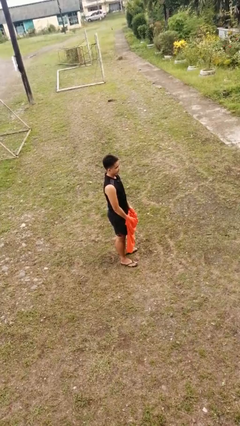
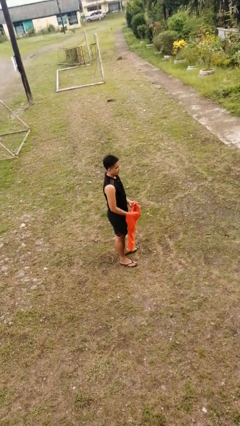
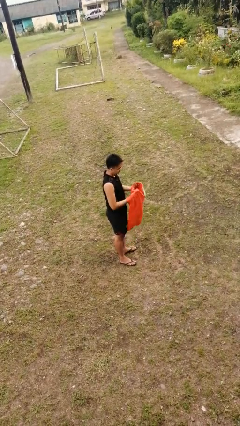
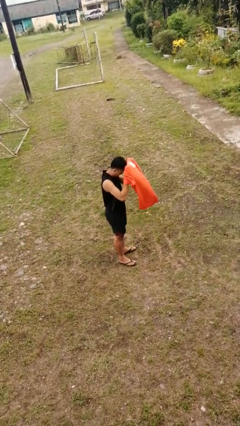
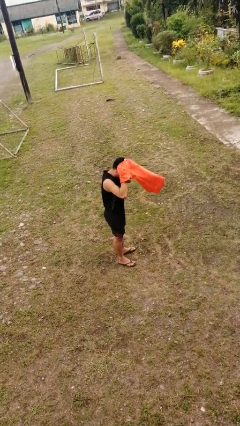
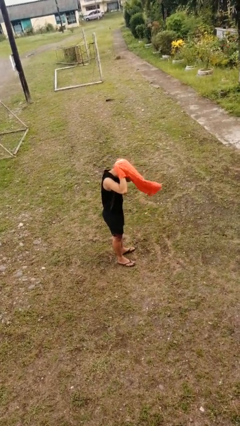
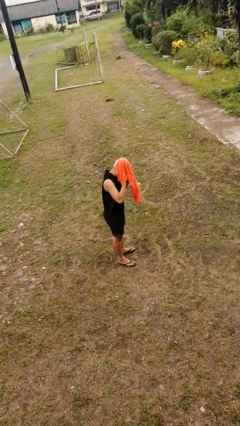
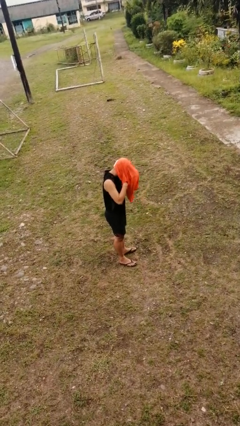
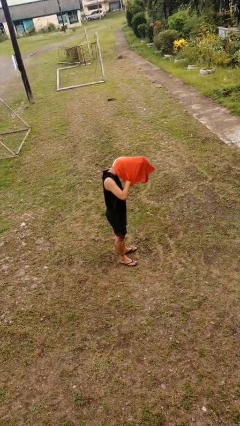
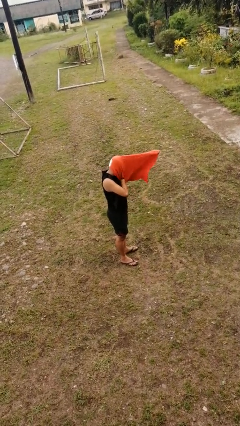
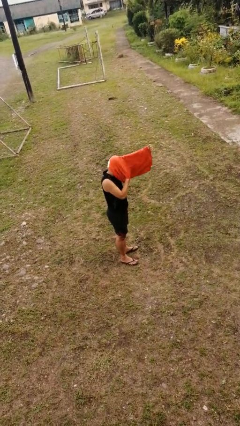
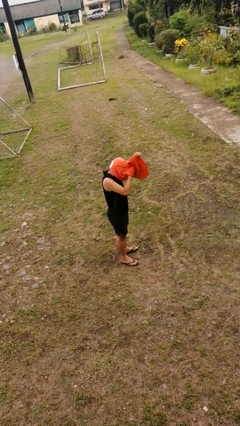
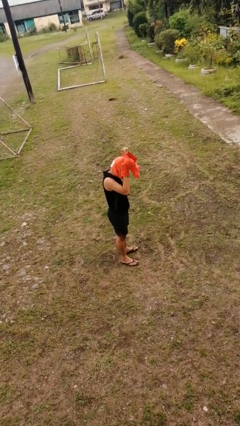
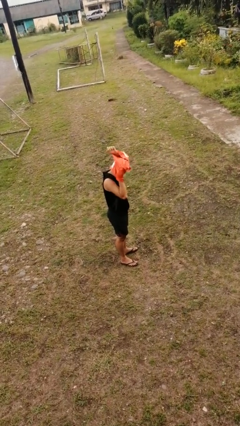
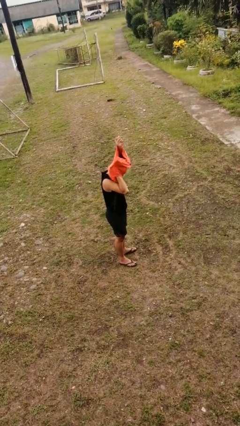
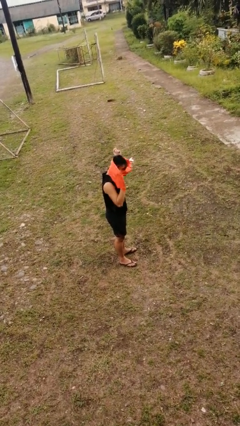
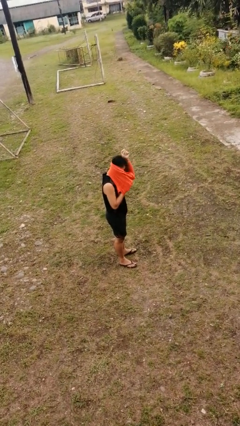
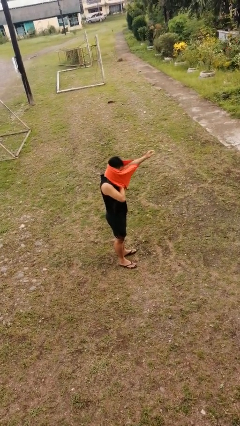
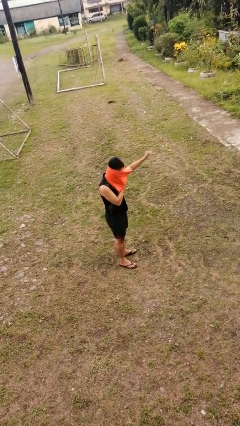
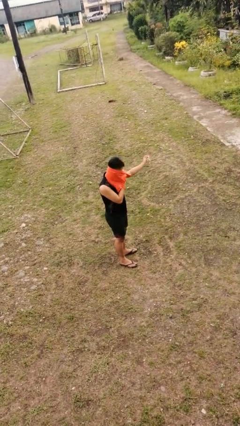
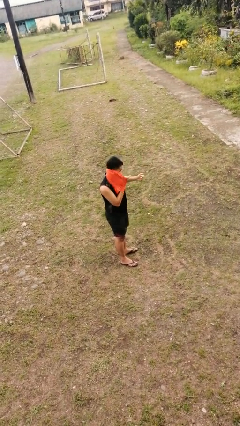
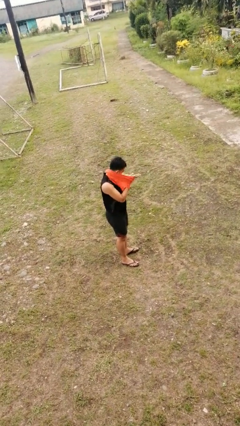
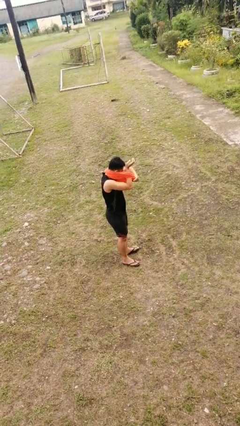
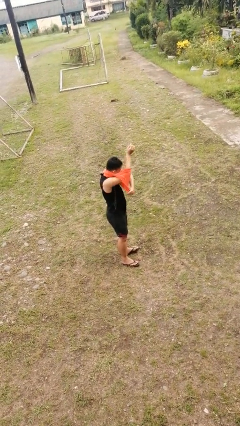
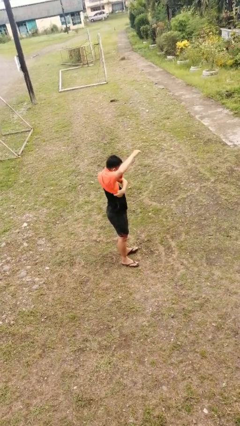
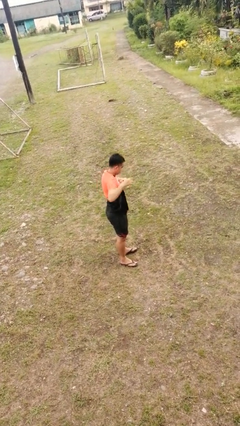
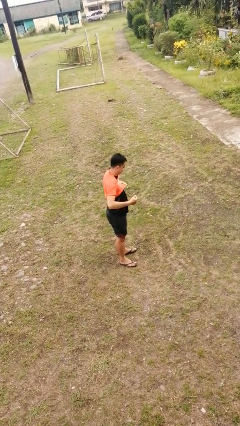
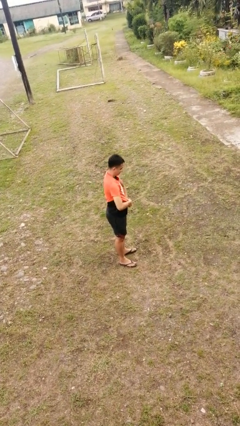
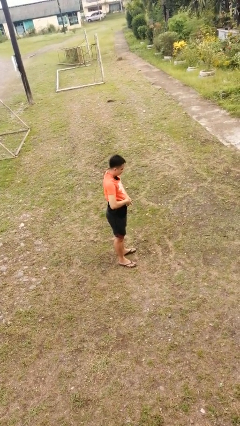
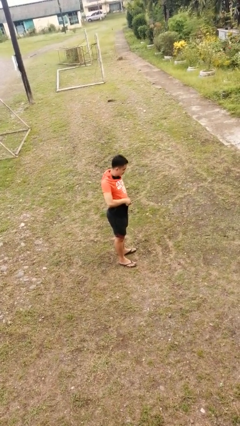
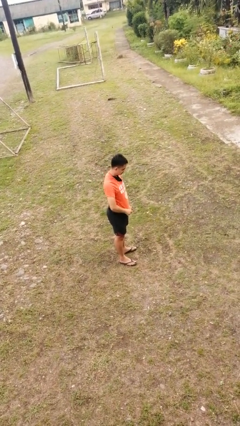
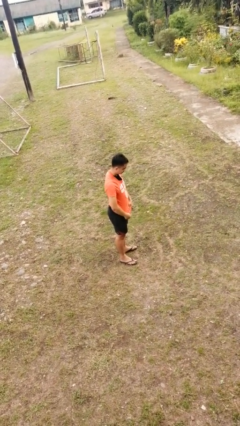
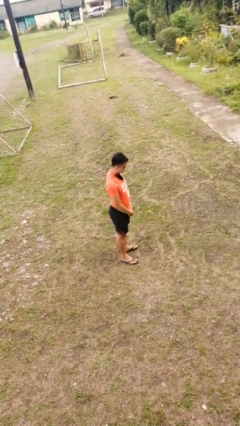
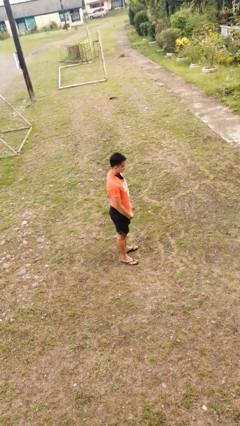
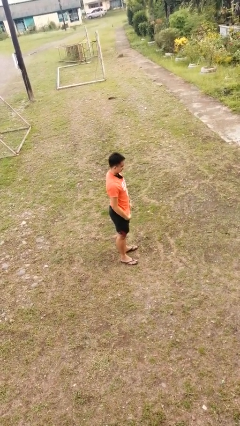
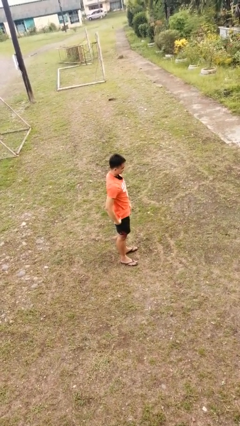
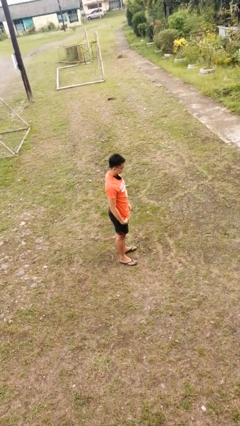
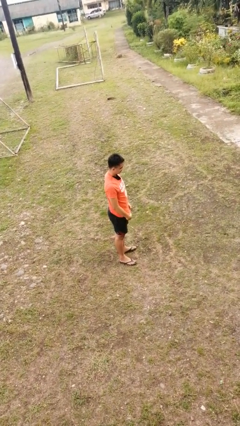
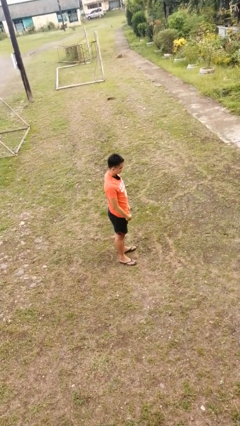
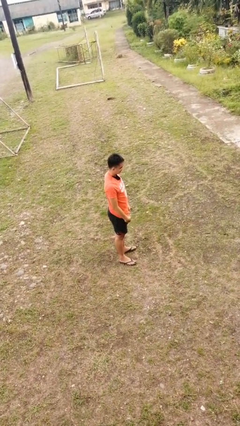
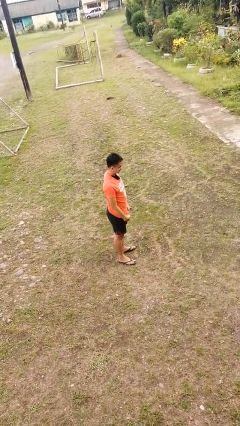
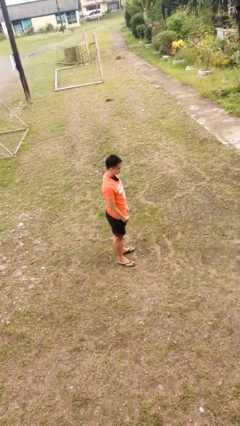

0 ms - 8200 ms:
person puts on shirt

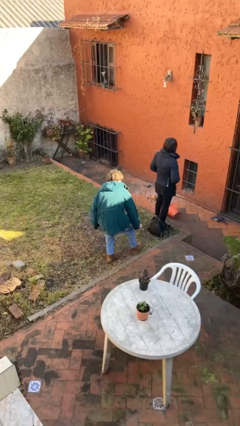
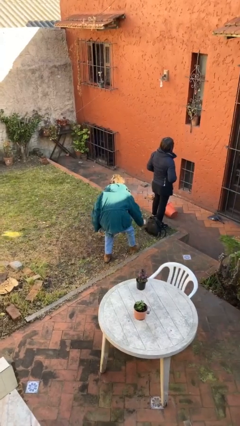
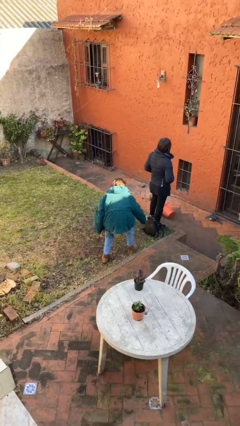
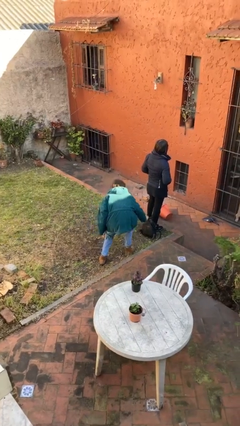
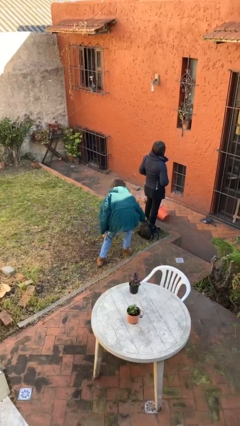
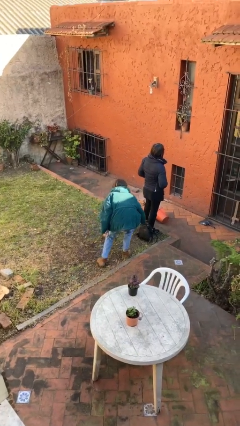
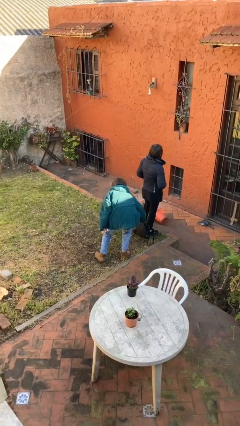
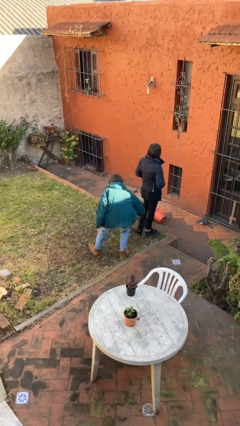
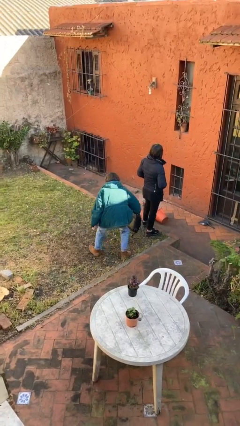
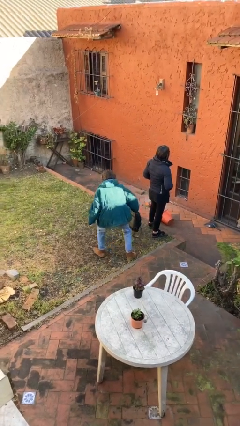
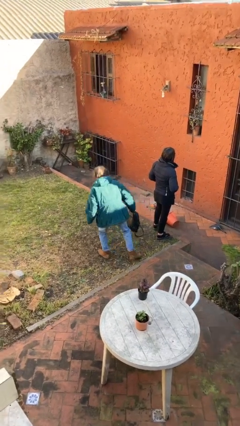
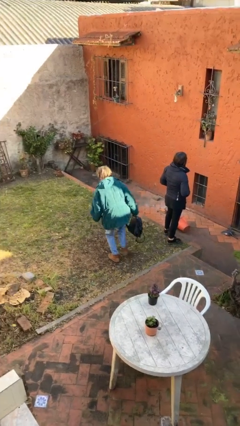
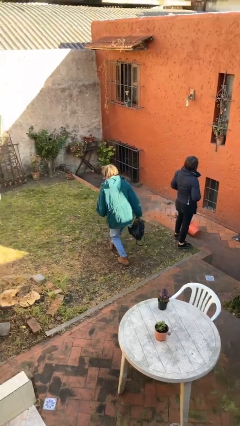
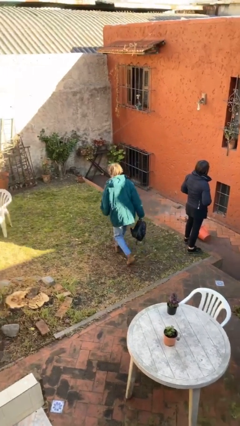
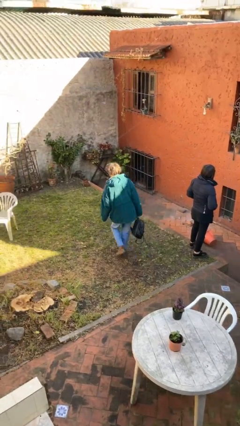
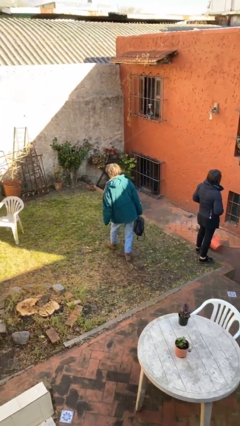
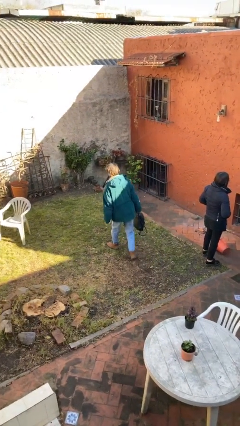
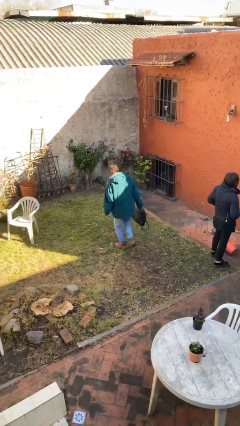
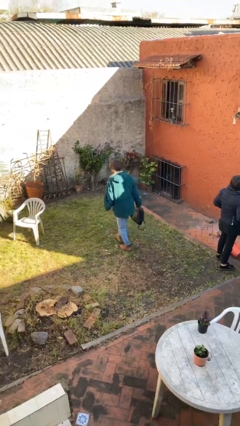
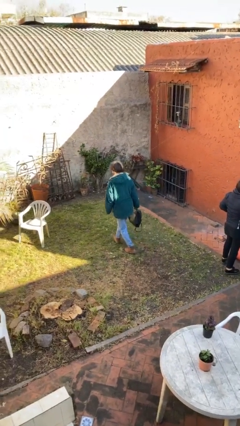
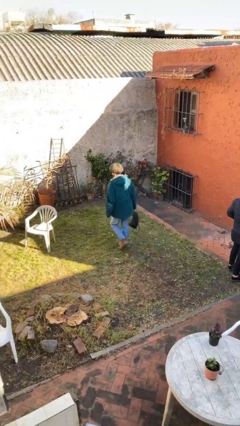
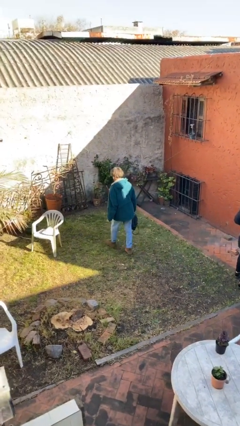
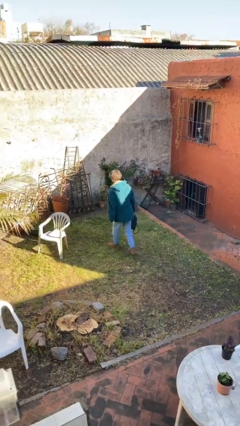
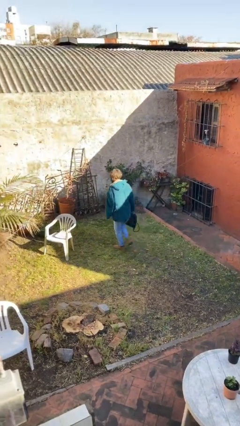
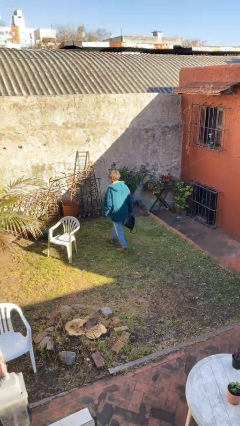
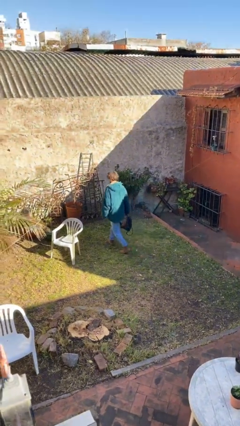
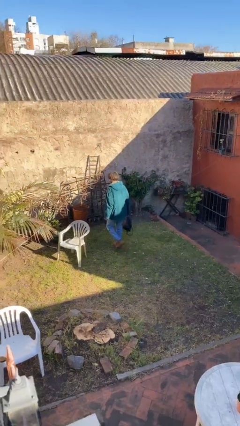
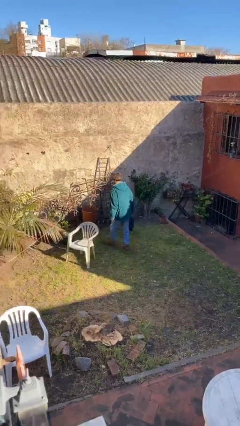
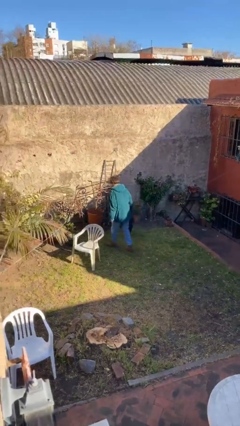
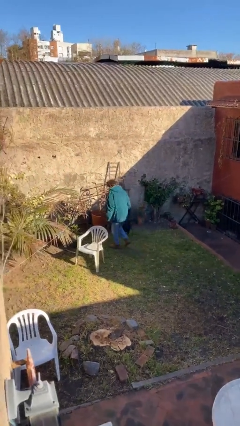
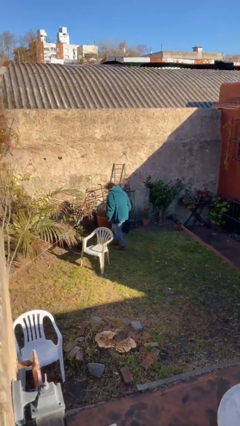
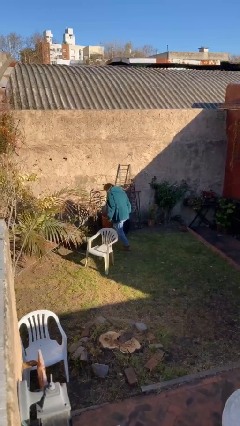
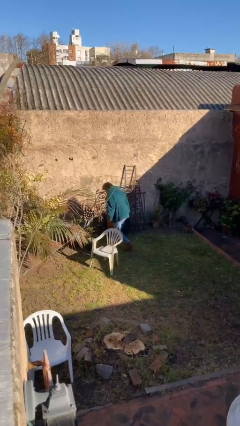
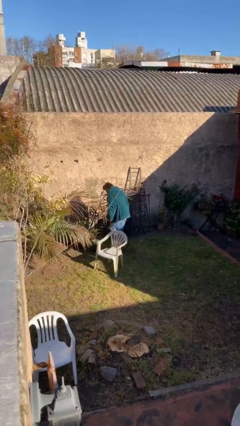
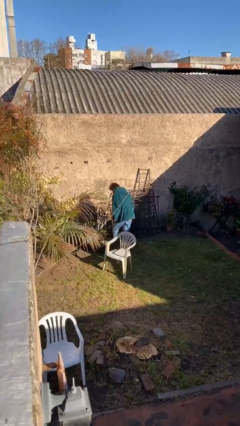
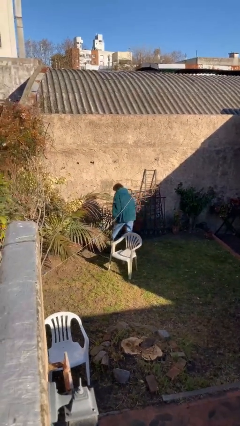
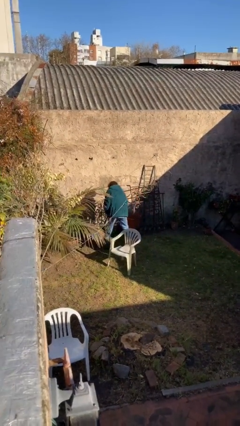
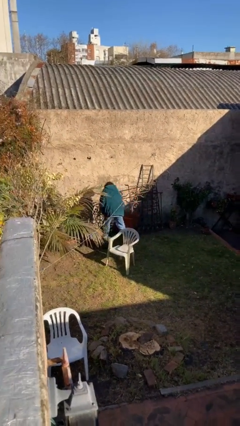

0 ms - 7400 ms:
person steals object from person

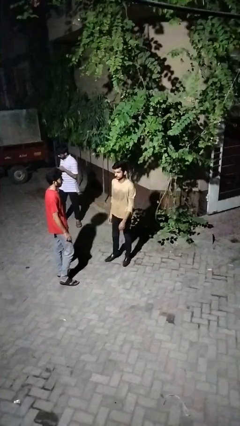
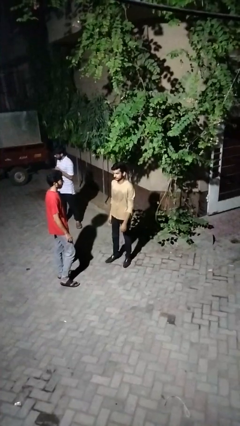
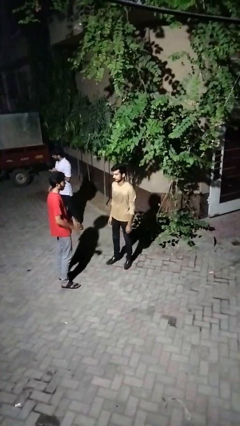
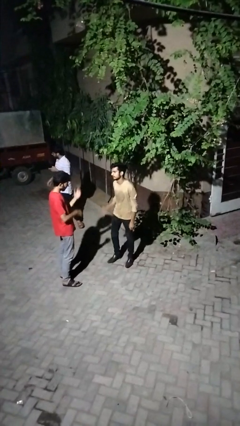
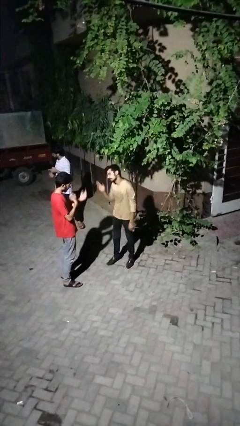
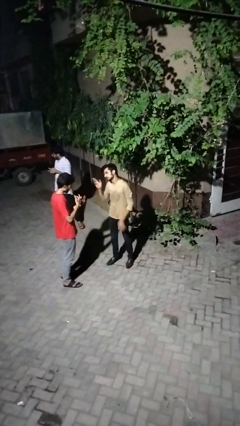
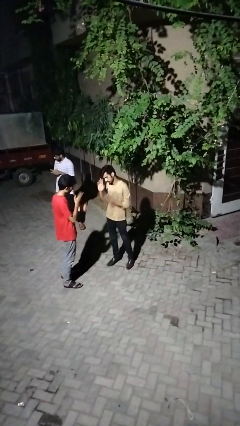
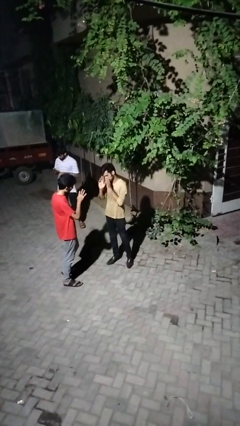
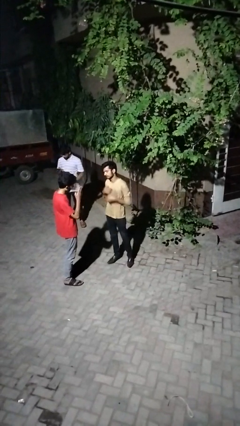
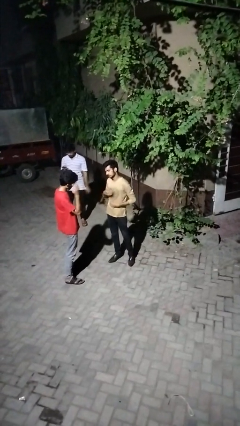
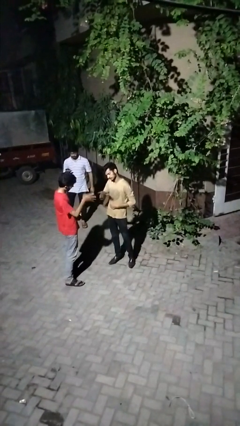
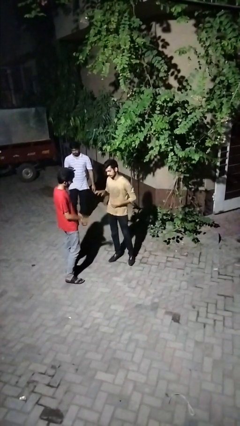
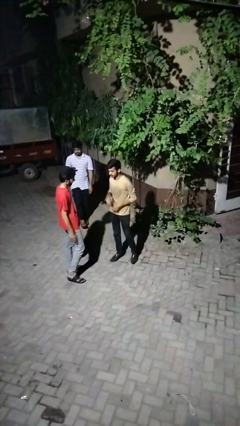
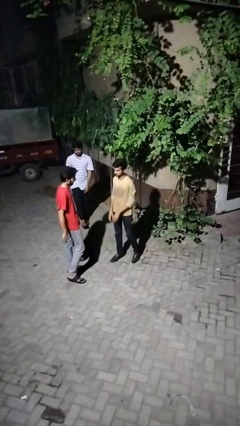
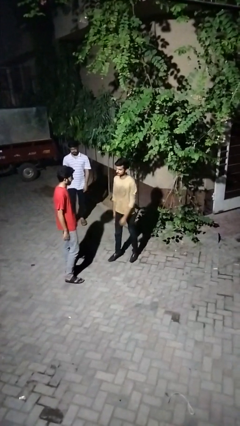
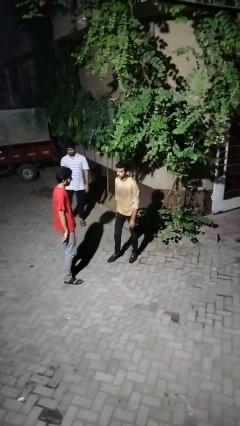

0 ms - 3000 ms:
person talks to person
